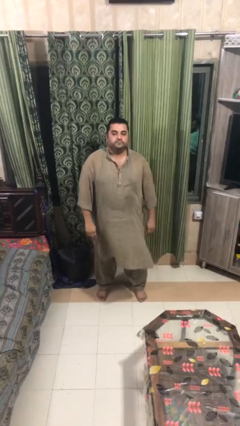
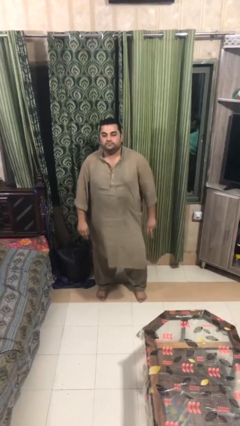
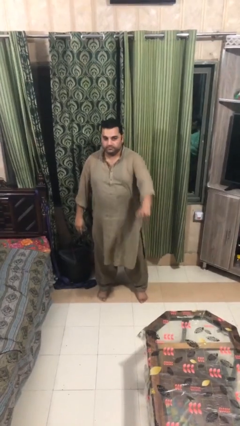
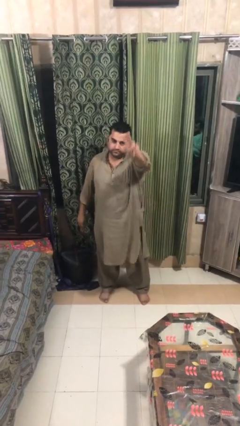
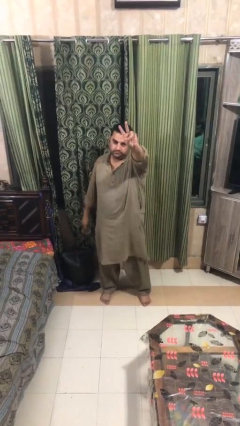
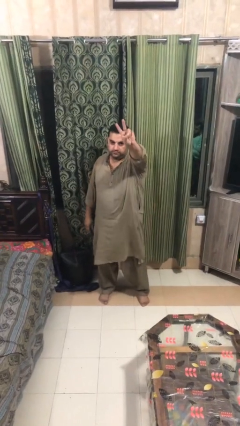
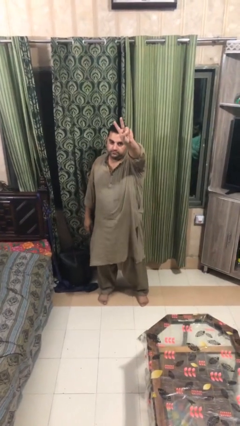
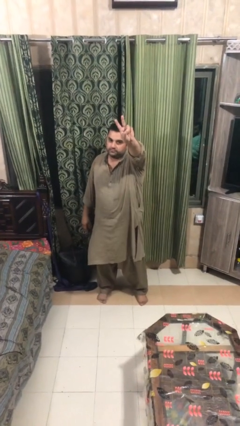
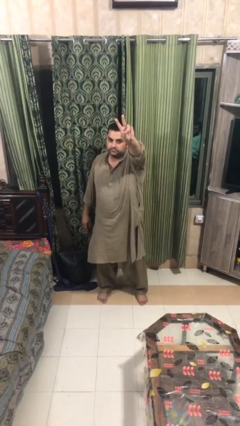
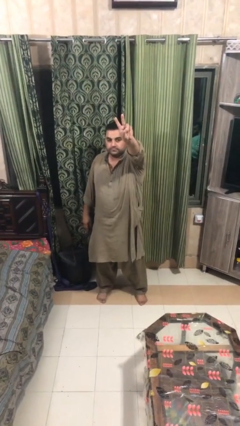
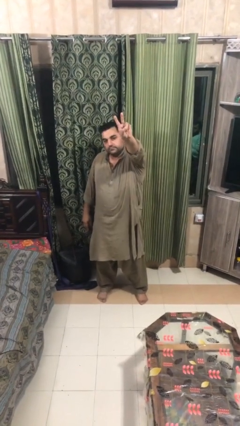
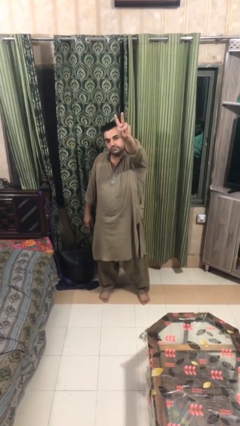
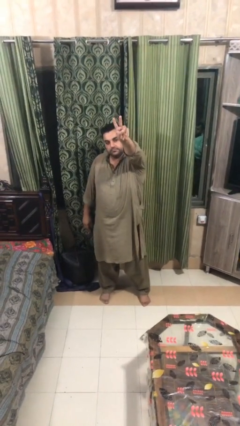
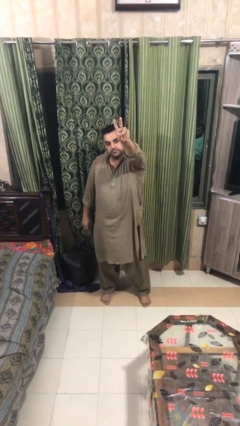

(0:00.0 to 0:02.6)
person gestures peace

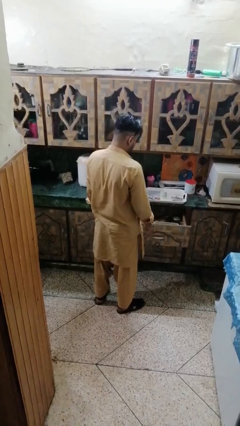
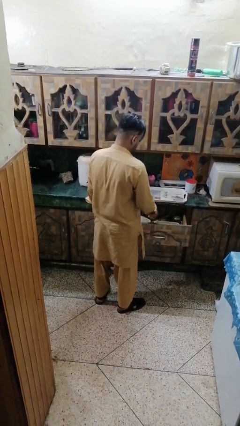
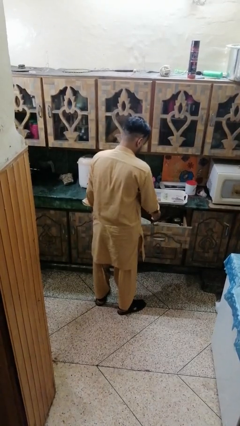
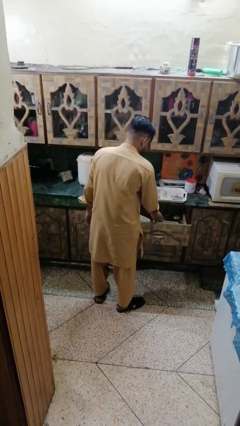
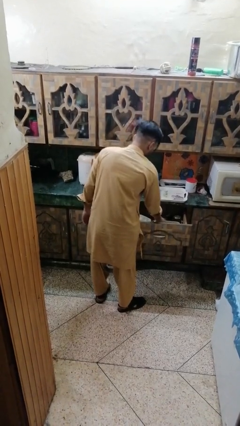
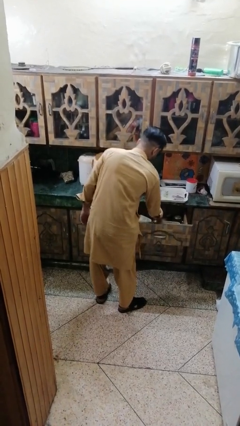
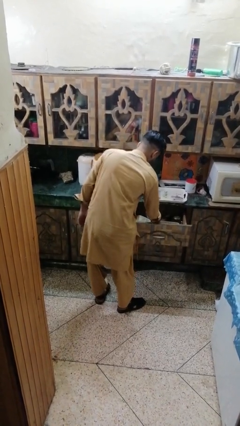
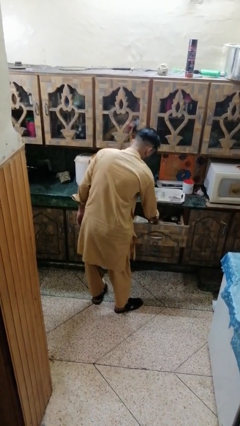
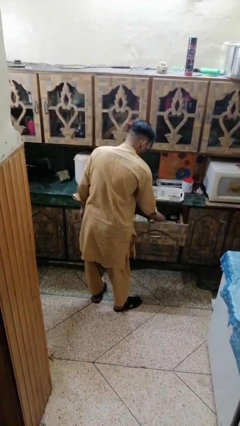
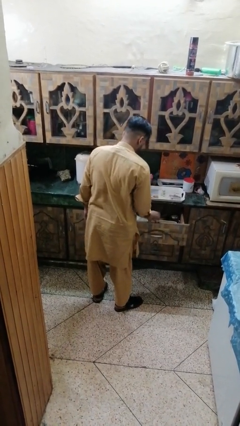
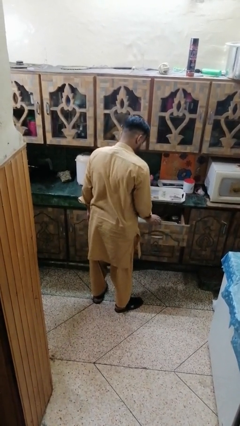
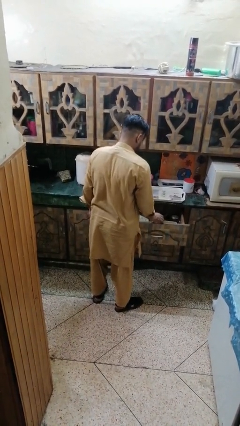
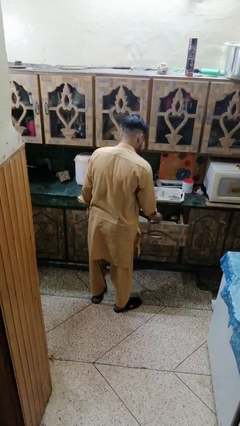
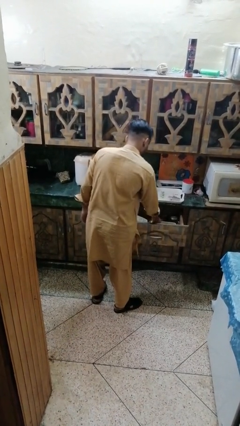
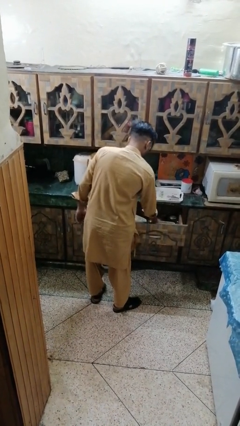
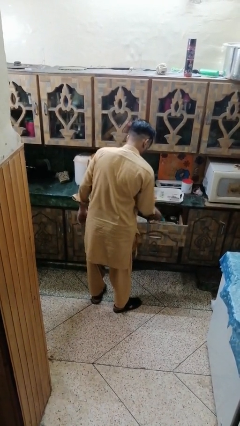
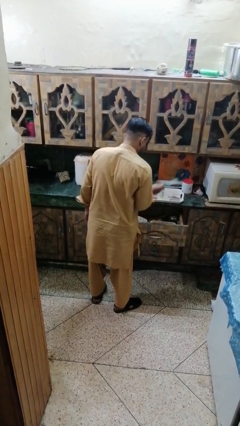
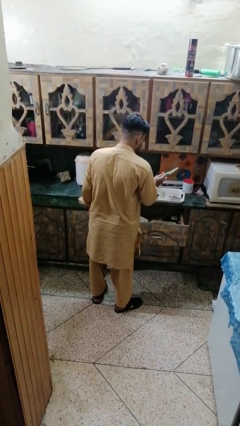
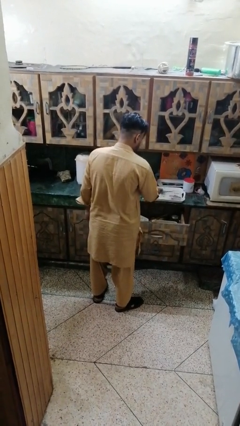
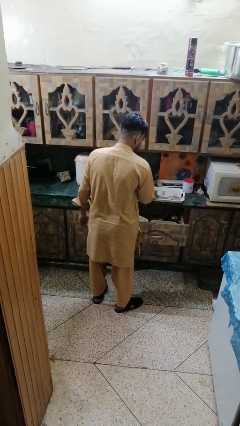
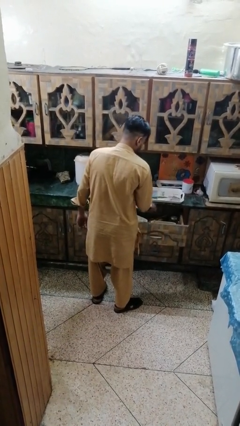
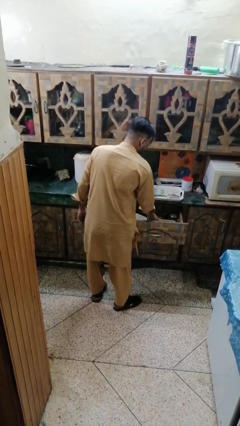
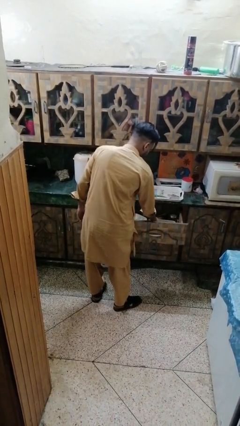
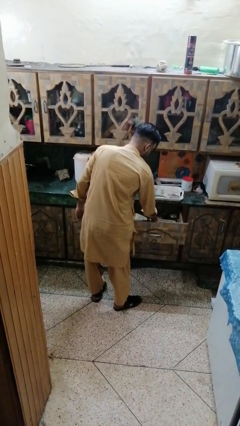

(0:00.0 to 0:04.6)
person takes object from kitchen drawer

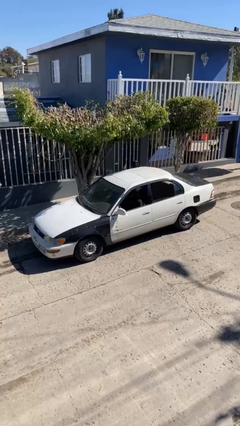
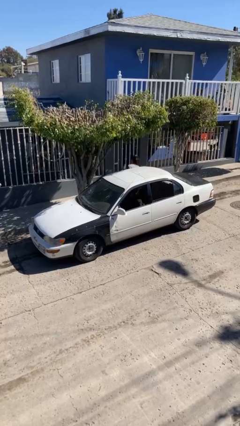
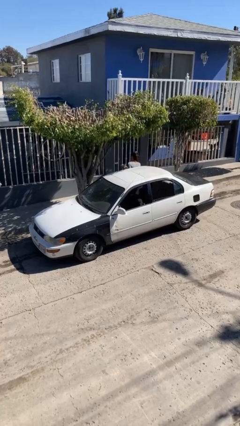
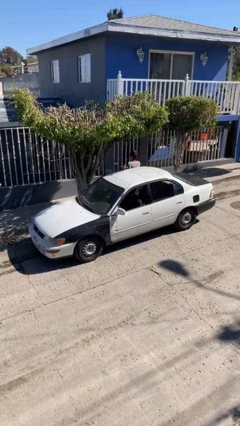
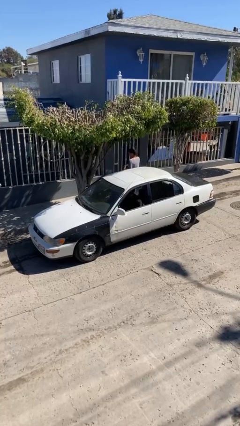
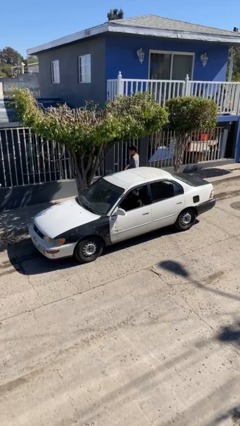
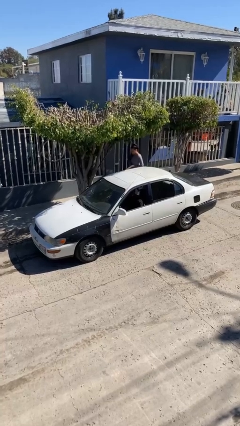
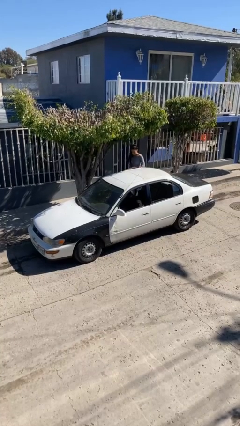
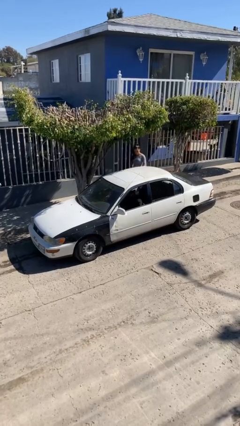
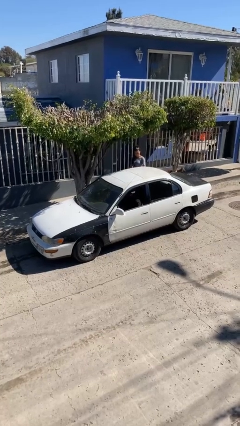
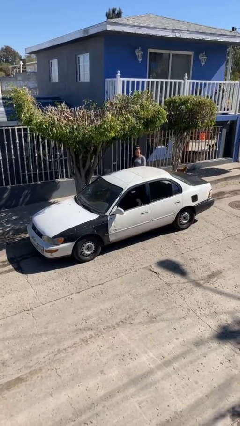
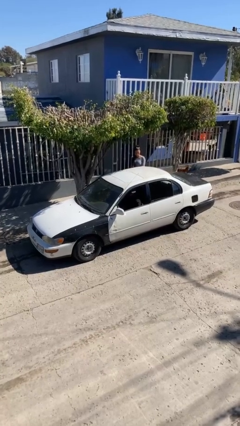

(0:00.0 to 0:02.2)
car drops off person

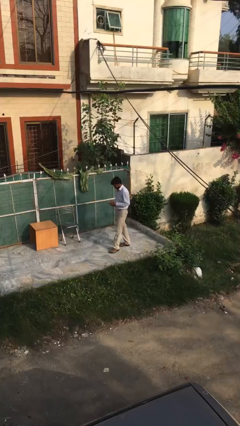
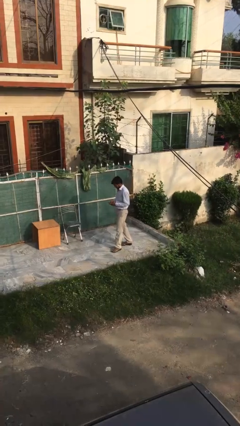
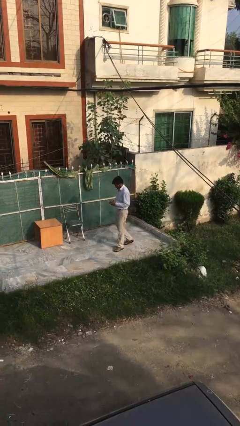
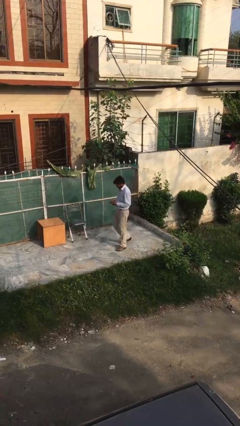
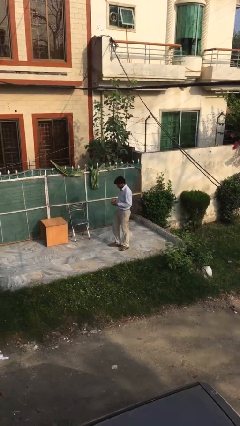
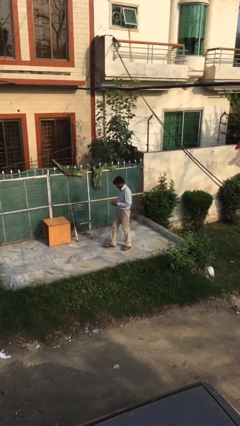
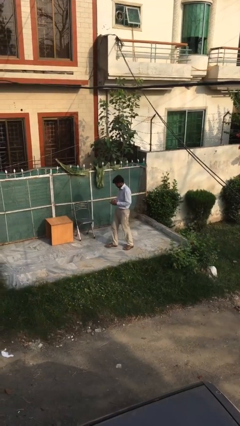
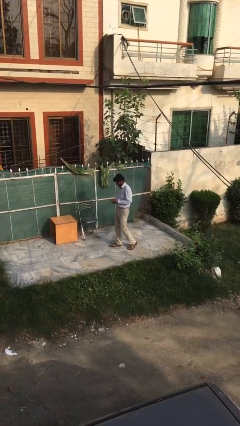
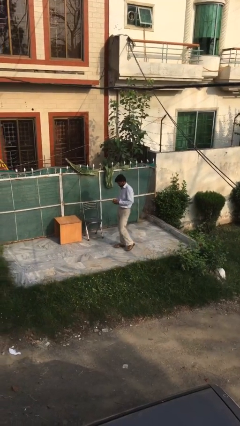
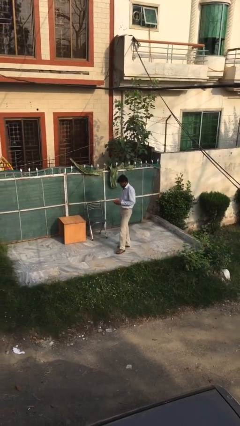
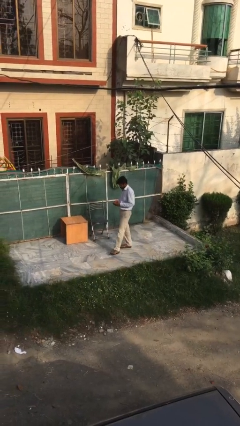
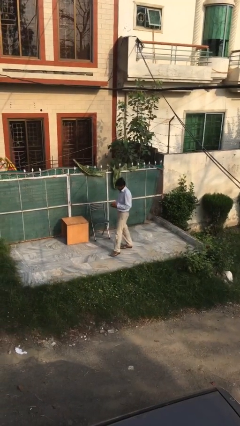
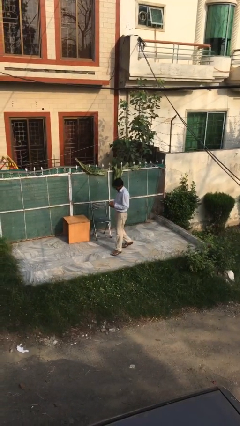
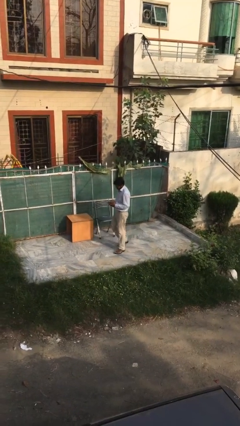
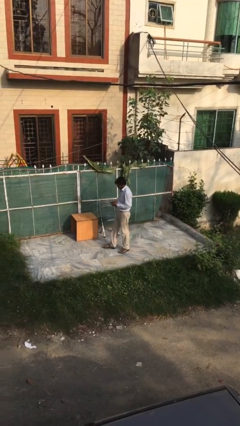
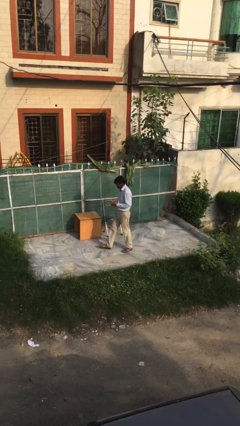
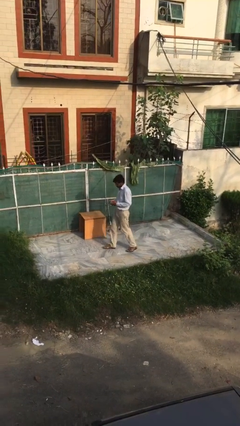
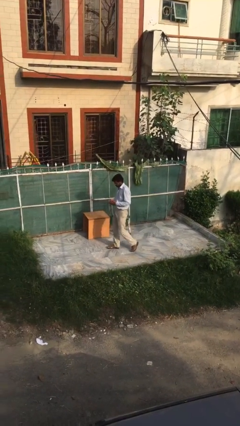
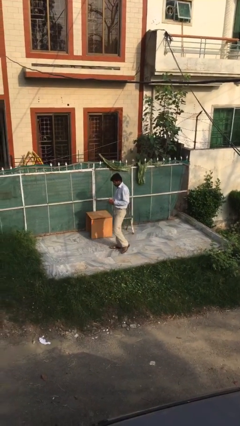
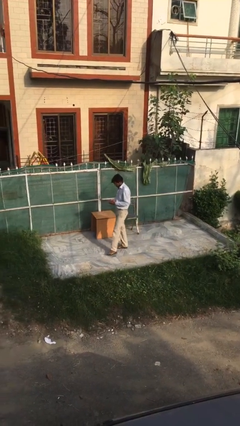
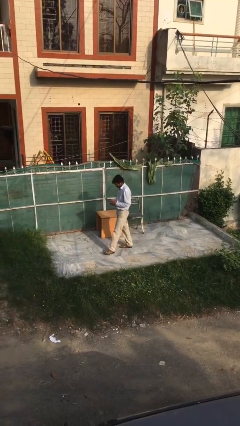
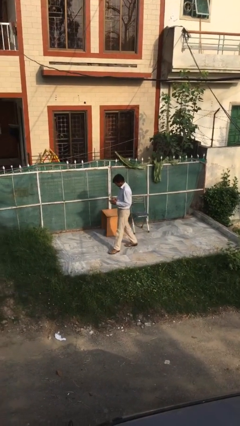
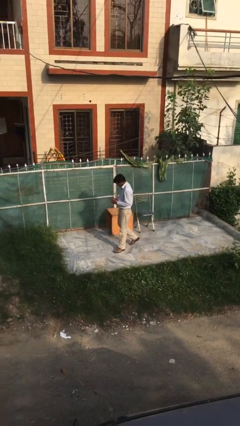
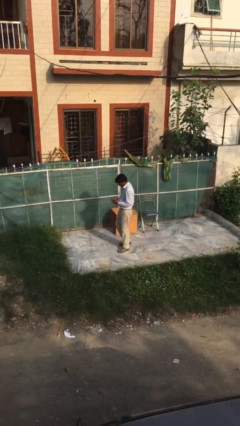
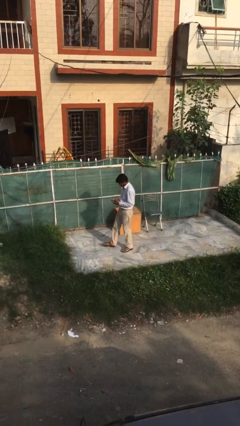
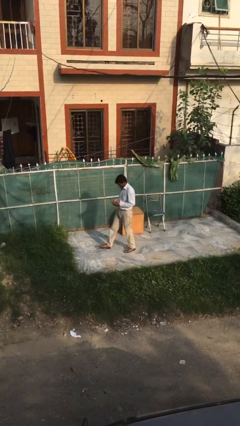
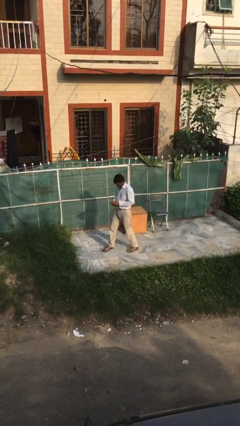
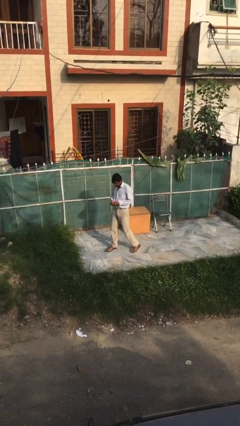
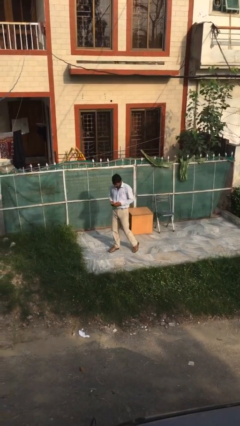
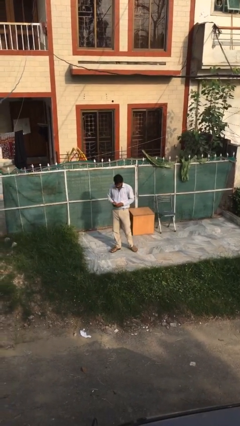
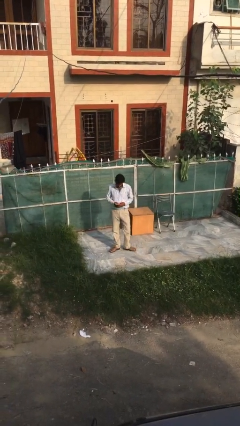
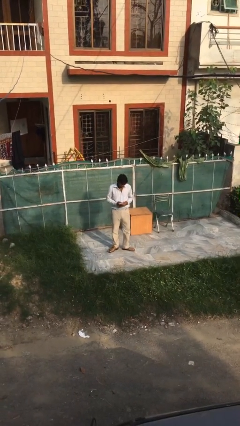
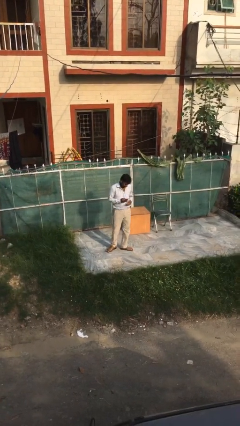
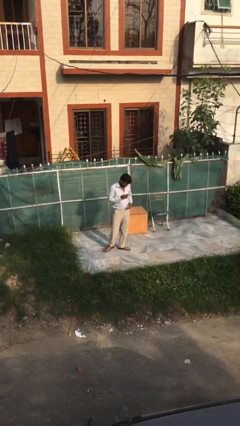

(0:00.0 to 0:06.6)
person texts on phone

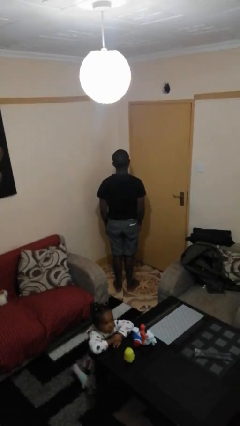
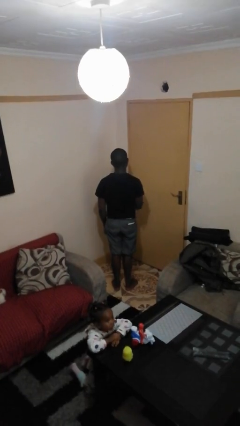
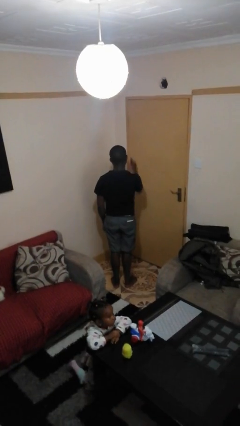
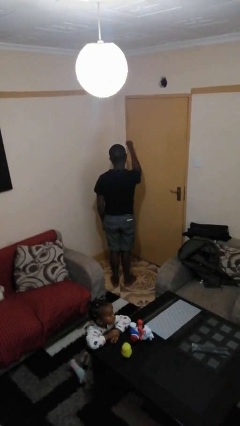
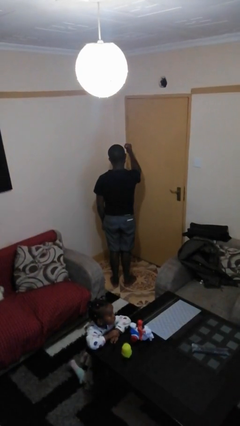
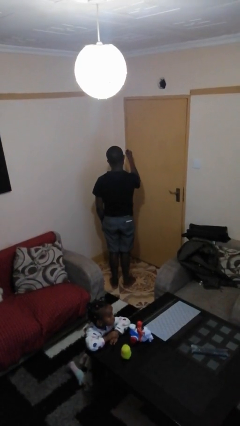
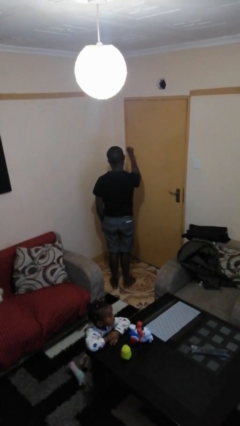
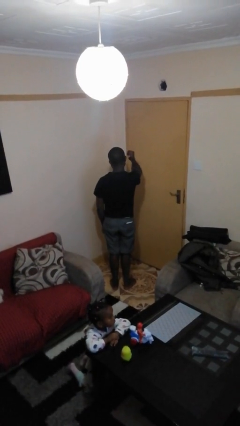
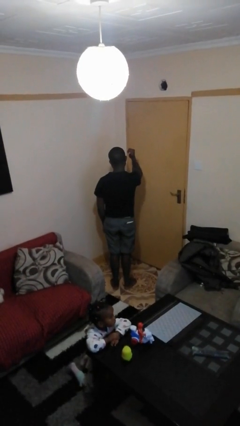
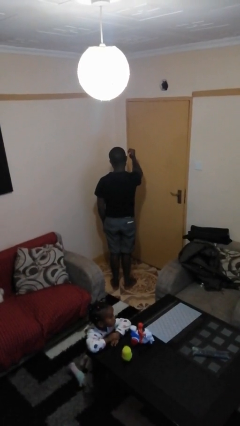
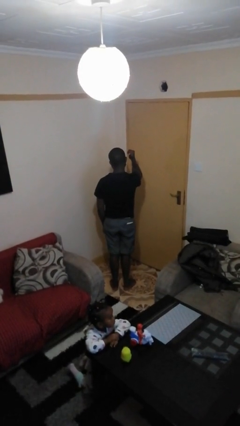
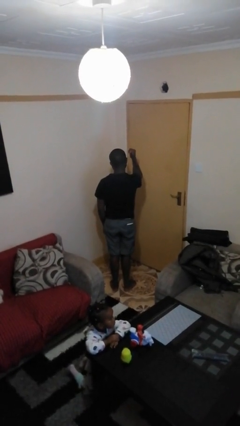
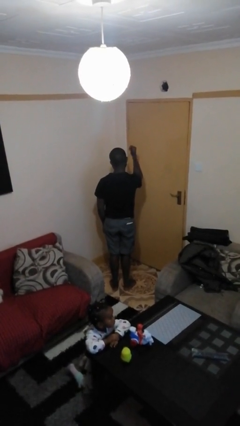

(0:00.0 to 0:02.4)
person gestures behind me
